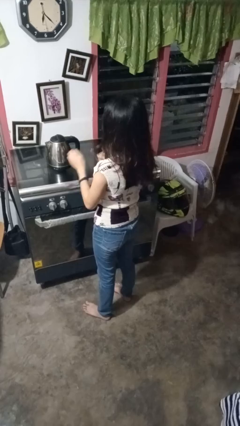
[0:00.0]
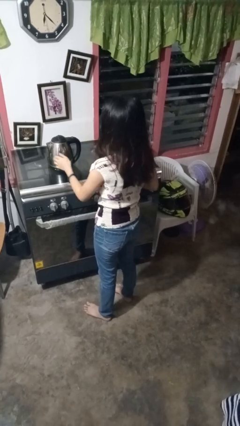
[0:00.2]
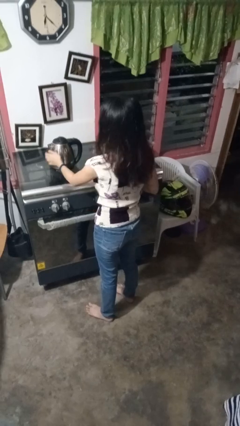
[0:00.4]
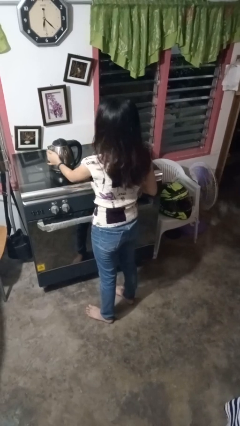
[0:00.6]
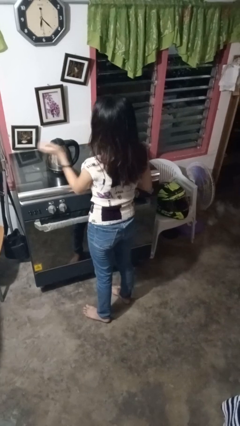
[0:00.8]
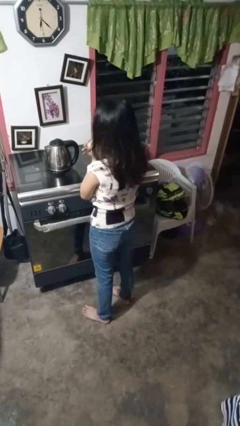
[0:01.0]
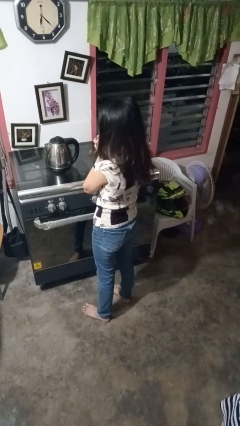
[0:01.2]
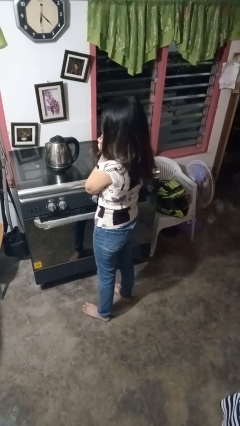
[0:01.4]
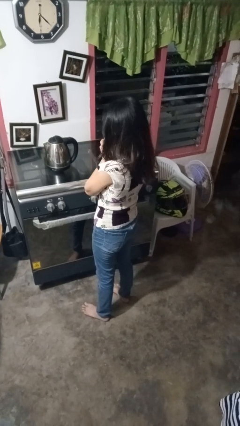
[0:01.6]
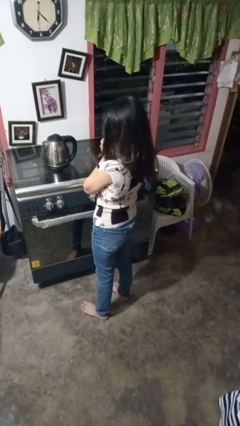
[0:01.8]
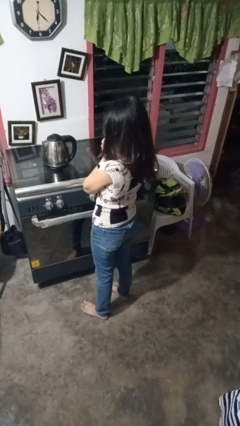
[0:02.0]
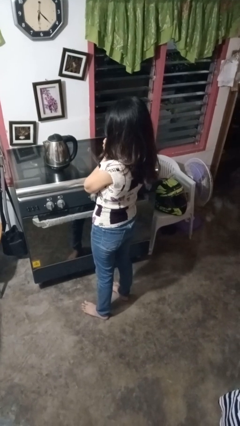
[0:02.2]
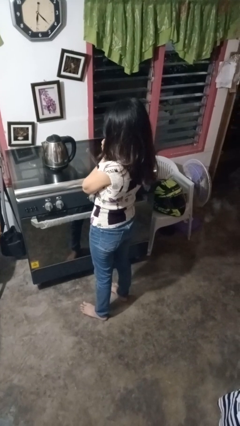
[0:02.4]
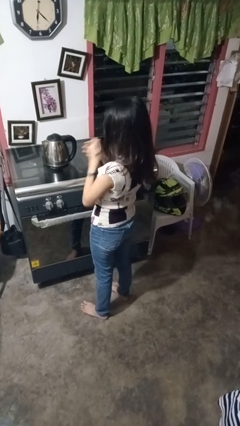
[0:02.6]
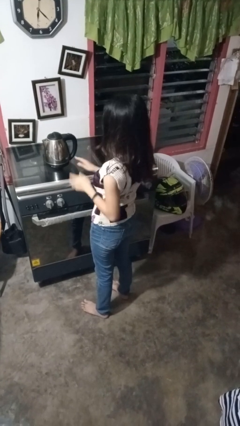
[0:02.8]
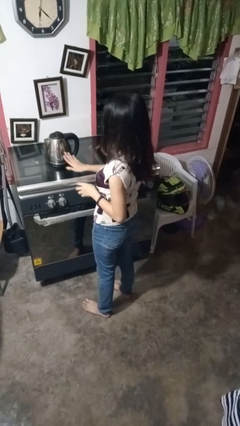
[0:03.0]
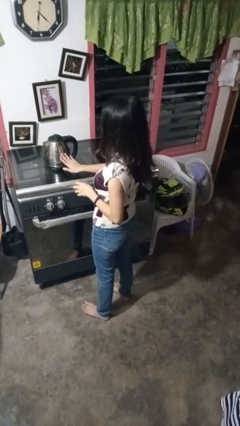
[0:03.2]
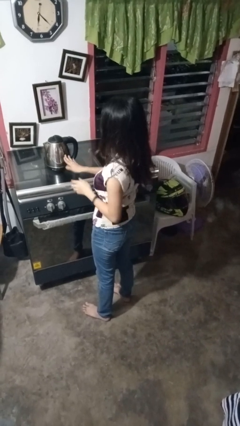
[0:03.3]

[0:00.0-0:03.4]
person takes off hoodie

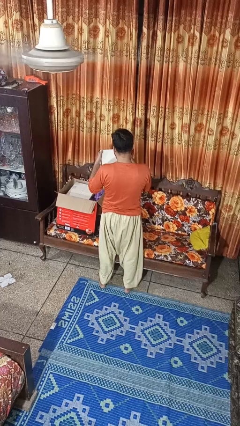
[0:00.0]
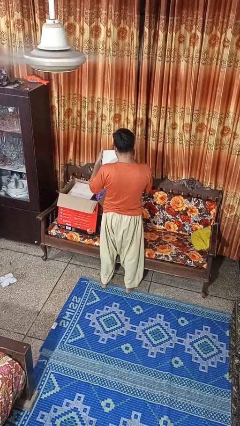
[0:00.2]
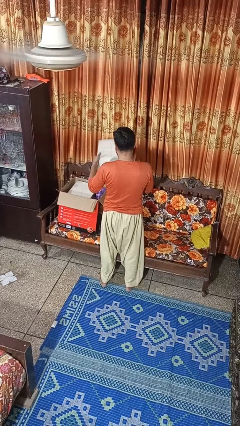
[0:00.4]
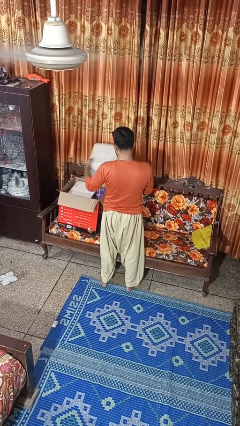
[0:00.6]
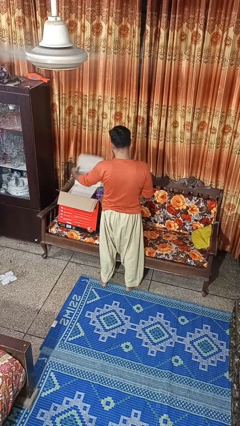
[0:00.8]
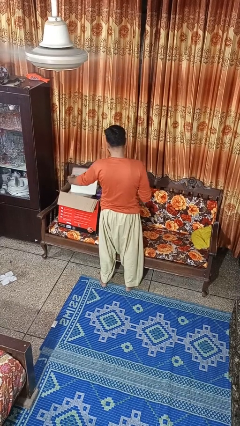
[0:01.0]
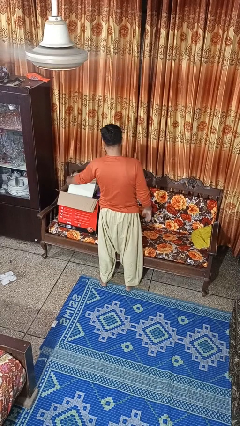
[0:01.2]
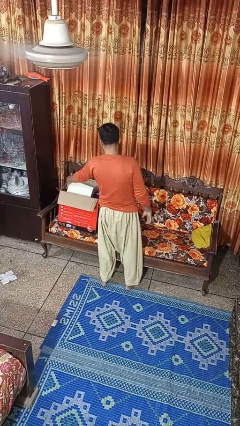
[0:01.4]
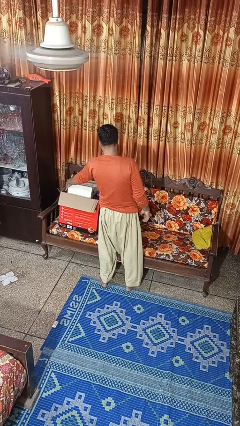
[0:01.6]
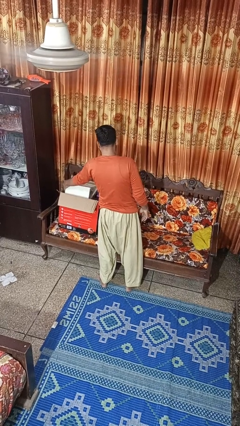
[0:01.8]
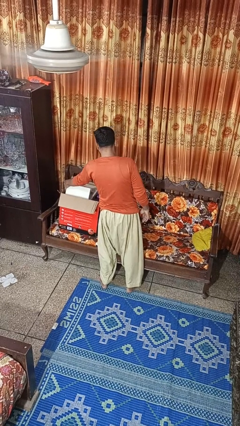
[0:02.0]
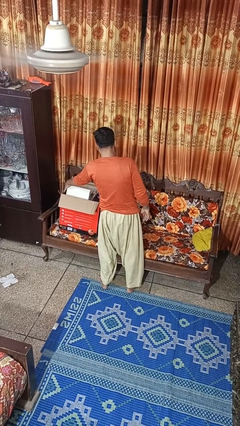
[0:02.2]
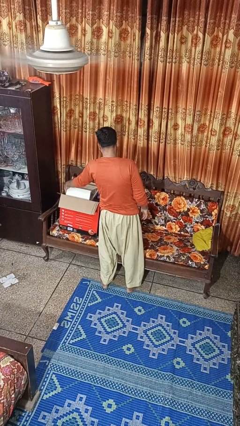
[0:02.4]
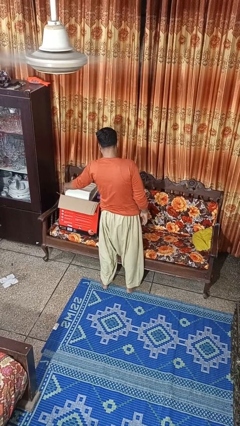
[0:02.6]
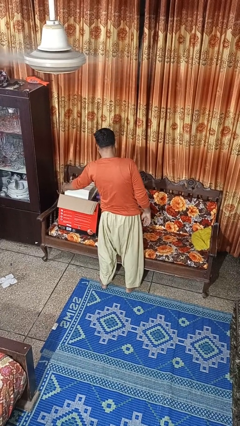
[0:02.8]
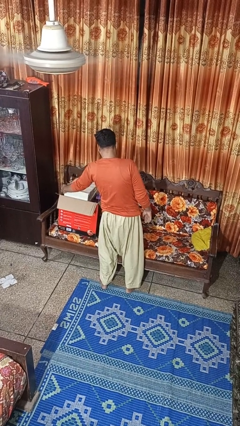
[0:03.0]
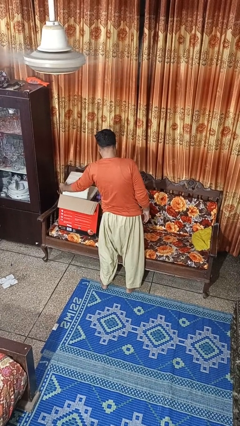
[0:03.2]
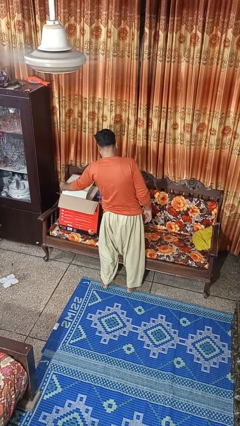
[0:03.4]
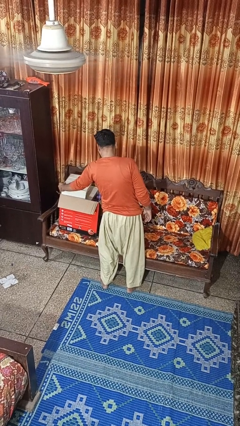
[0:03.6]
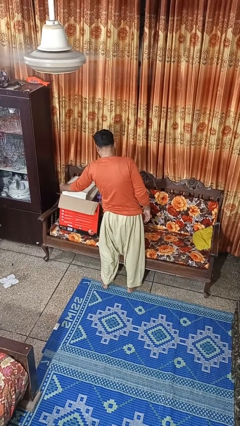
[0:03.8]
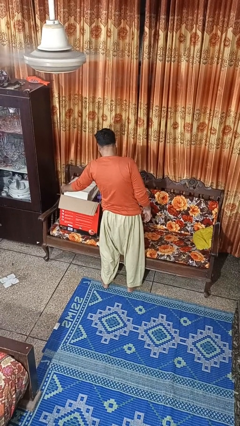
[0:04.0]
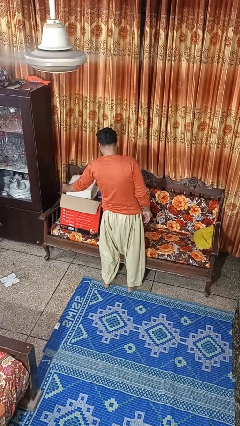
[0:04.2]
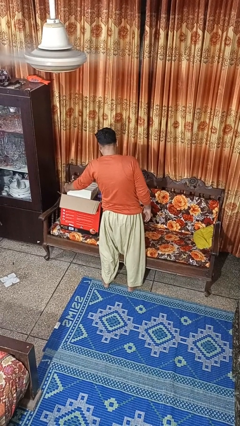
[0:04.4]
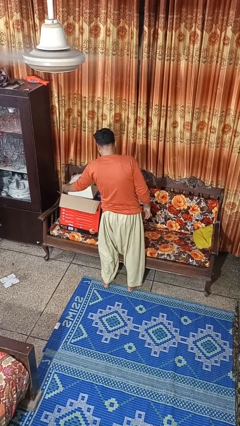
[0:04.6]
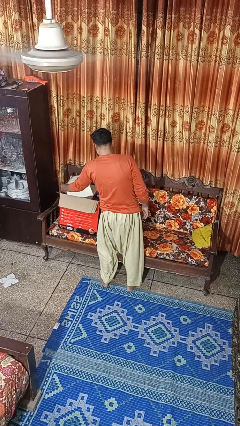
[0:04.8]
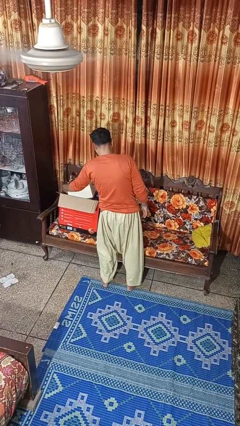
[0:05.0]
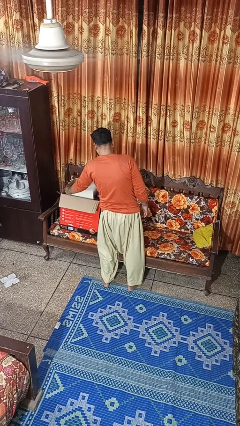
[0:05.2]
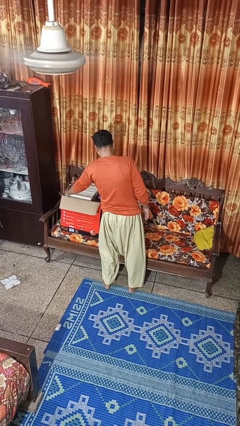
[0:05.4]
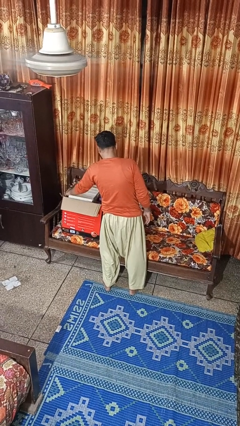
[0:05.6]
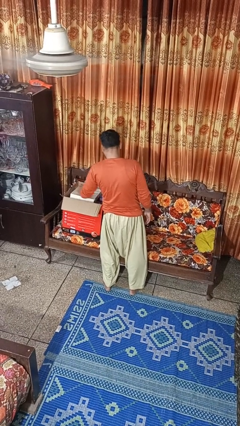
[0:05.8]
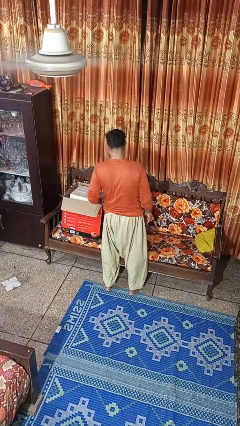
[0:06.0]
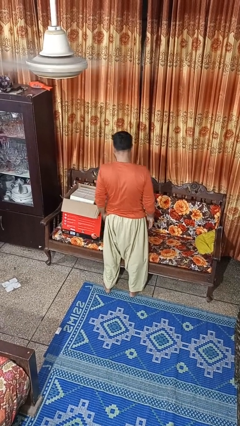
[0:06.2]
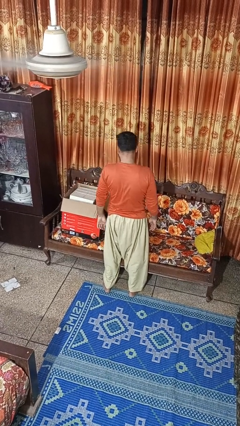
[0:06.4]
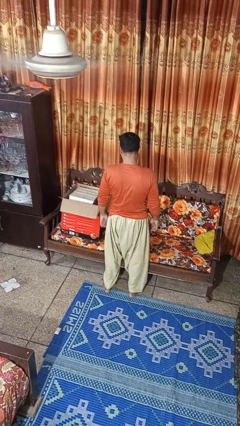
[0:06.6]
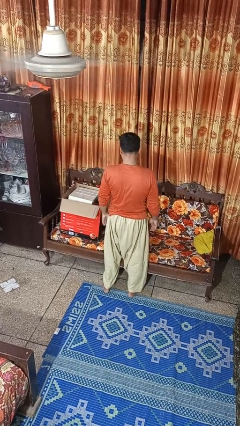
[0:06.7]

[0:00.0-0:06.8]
person puts object into box

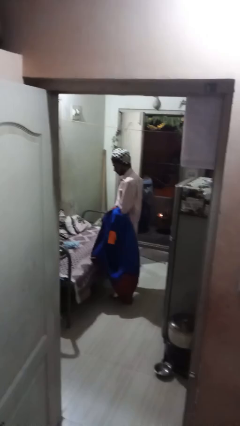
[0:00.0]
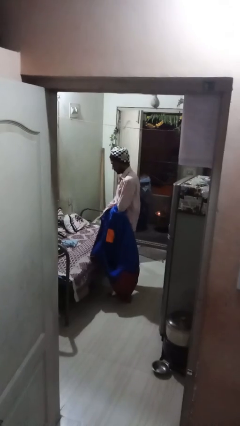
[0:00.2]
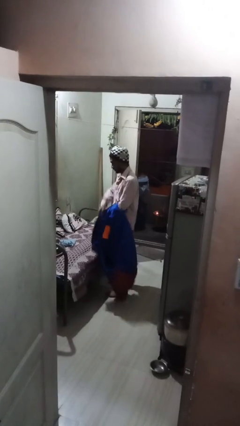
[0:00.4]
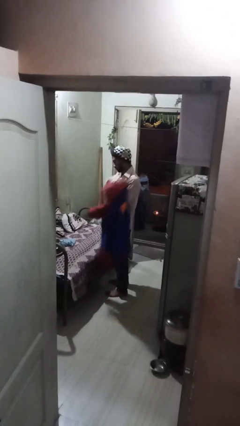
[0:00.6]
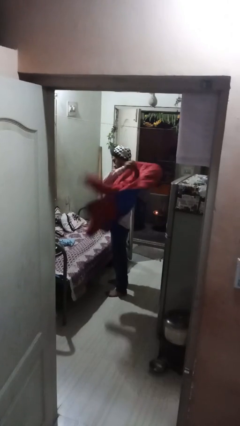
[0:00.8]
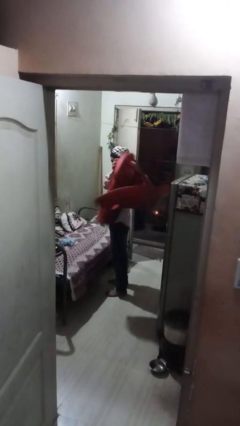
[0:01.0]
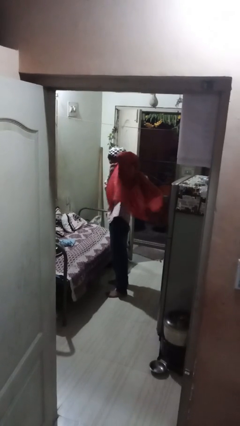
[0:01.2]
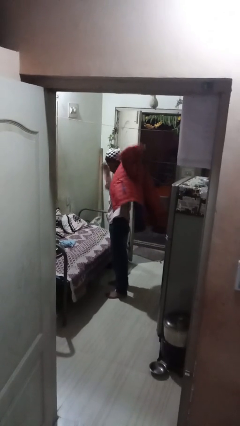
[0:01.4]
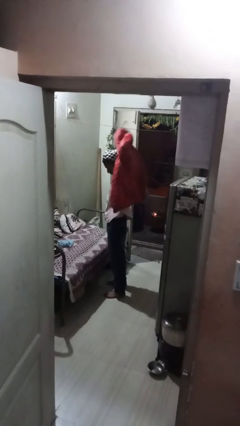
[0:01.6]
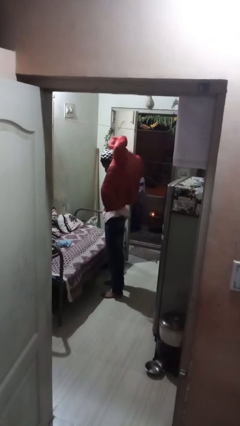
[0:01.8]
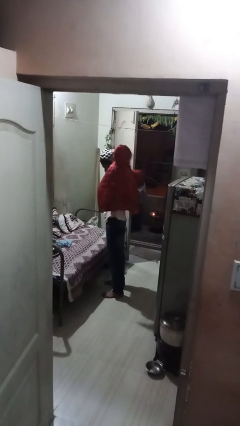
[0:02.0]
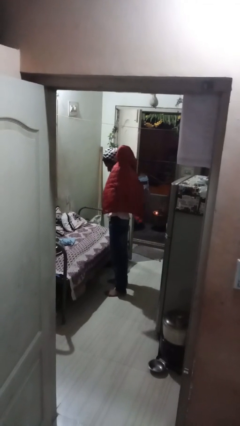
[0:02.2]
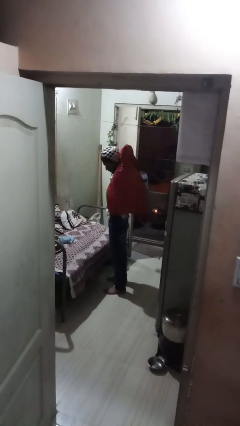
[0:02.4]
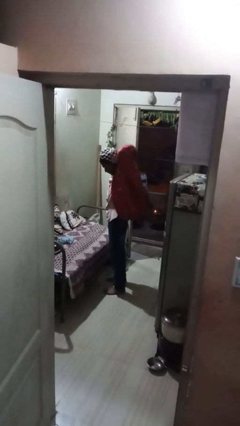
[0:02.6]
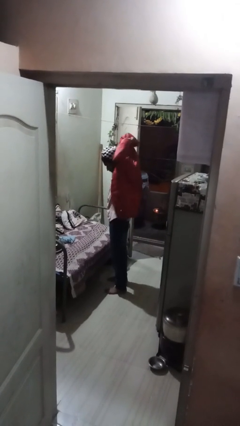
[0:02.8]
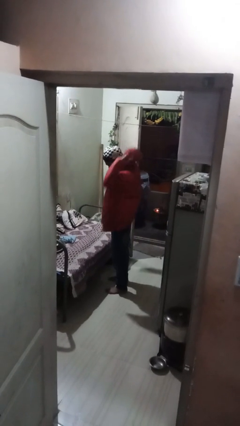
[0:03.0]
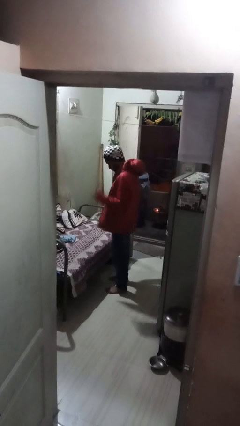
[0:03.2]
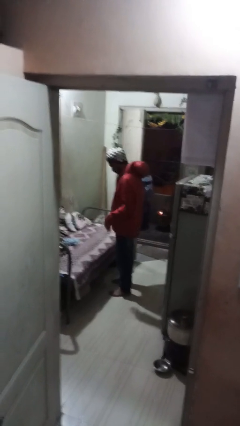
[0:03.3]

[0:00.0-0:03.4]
person puts on jacket

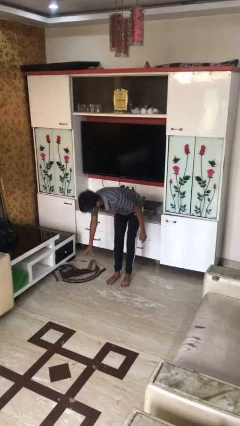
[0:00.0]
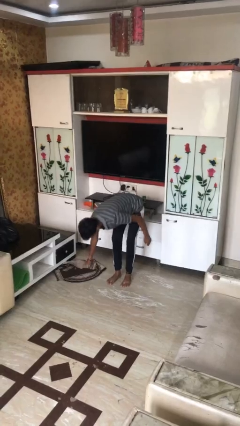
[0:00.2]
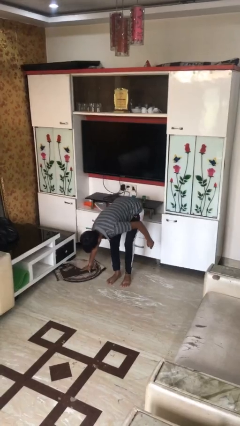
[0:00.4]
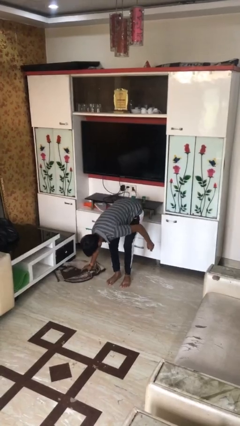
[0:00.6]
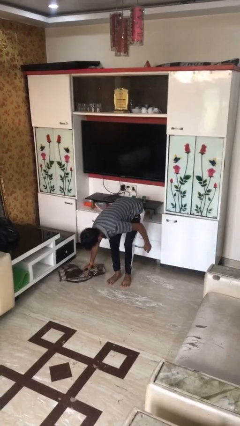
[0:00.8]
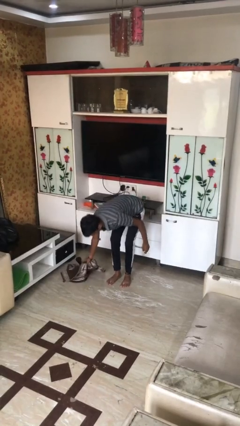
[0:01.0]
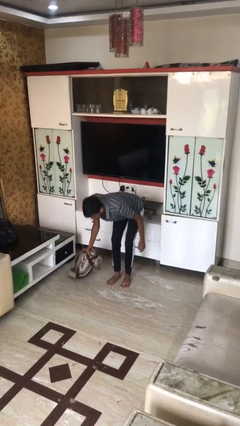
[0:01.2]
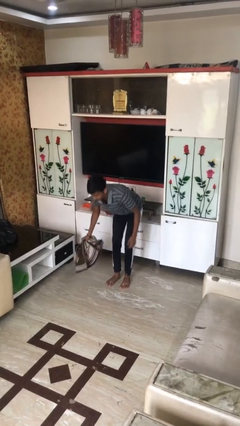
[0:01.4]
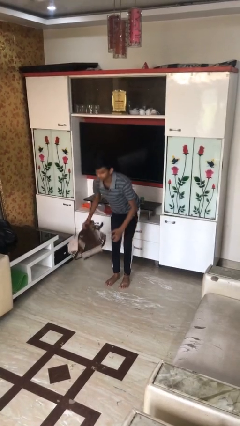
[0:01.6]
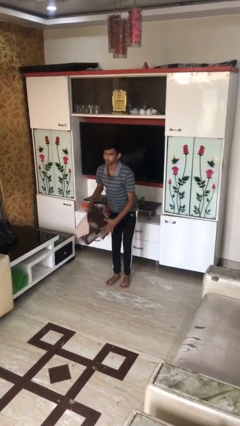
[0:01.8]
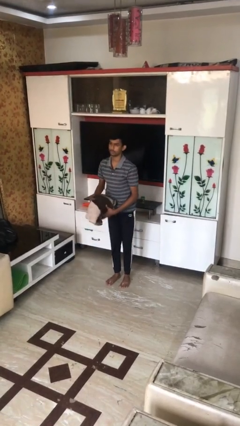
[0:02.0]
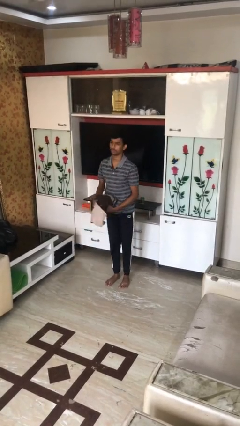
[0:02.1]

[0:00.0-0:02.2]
person picks up object from floor

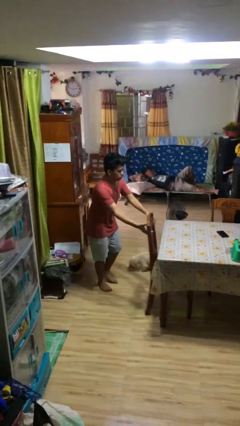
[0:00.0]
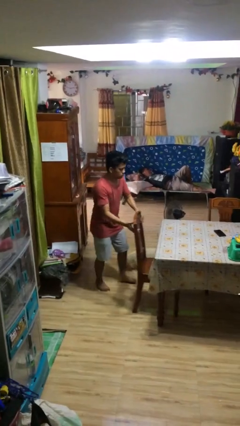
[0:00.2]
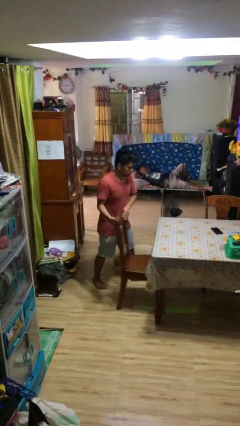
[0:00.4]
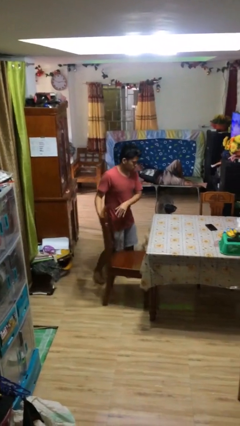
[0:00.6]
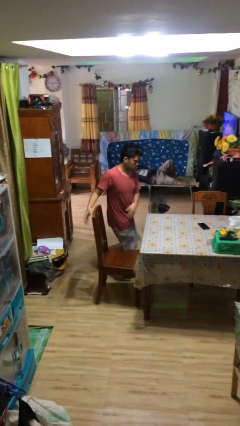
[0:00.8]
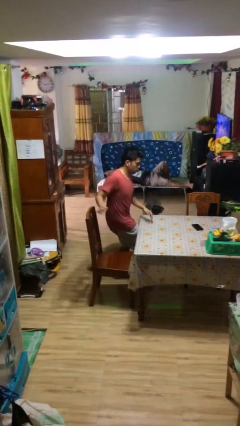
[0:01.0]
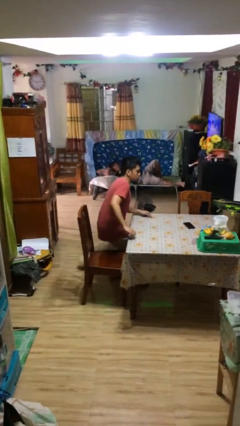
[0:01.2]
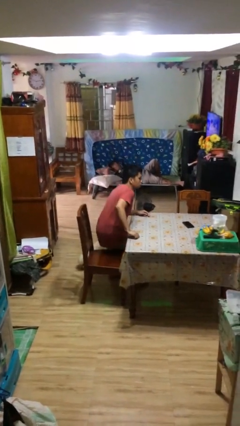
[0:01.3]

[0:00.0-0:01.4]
person stands up
